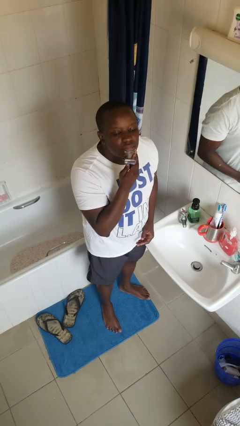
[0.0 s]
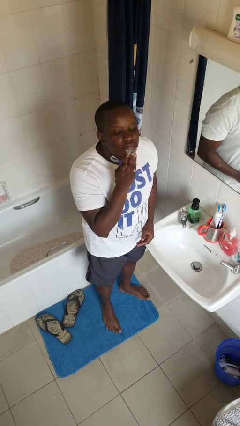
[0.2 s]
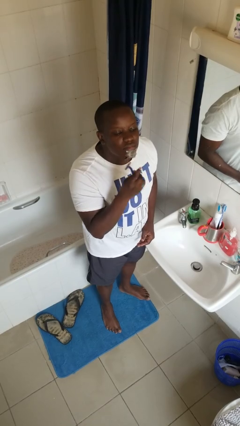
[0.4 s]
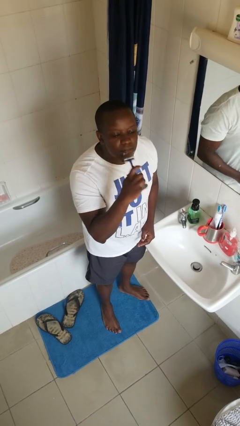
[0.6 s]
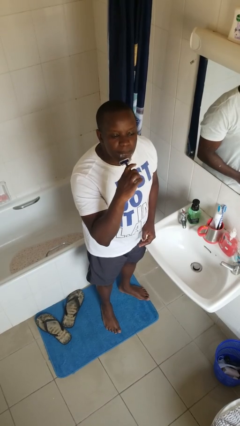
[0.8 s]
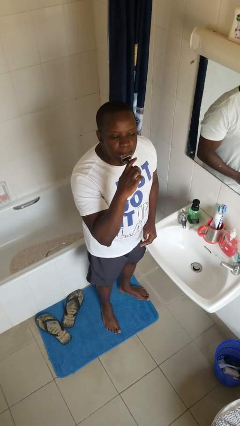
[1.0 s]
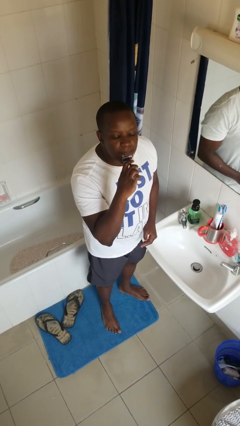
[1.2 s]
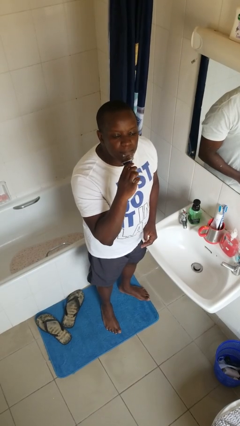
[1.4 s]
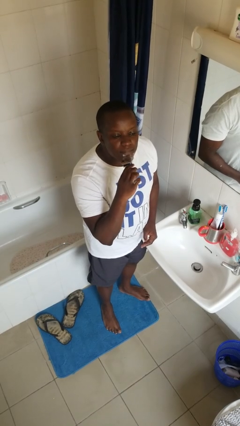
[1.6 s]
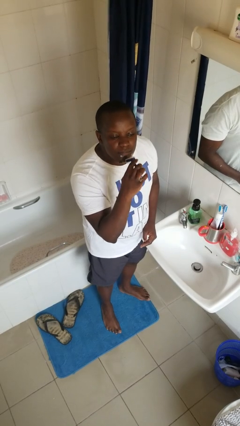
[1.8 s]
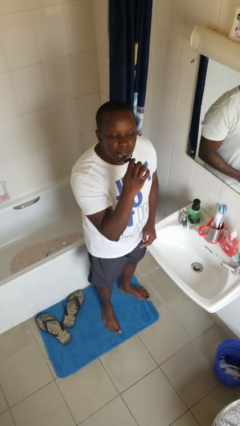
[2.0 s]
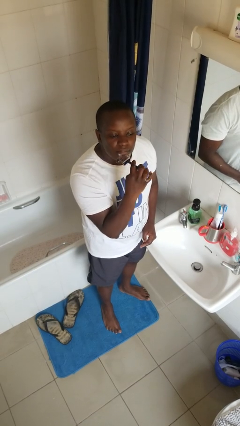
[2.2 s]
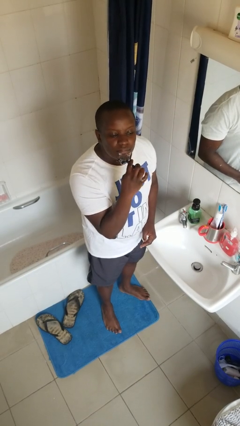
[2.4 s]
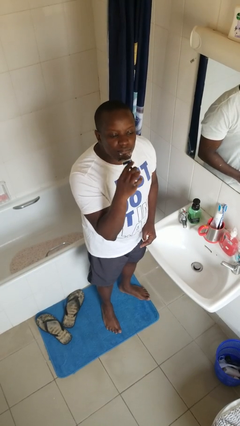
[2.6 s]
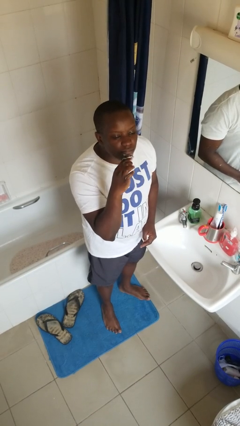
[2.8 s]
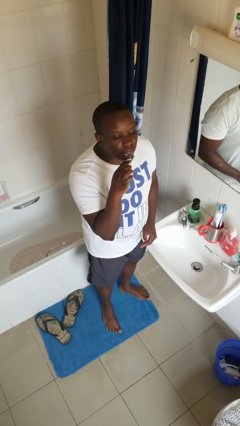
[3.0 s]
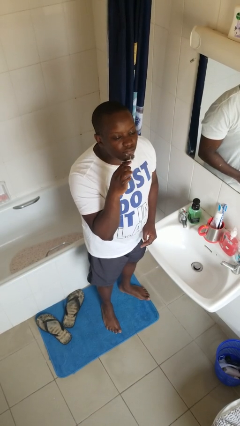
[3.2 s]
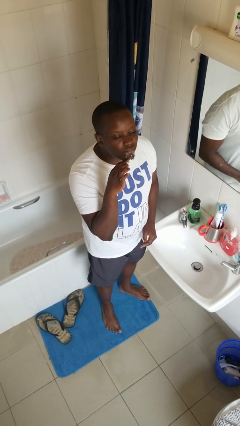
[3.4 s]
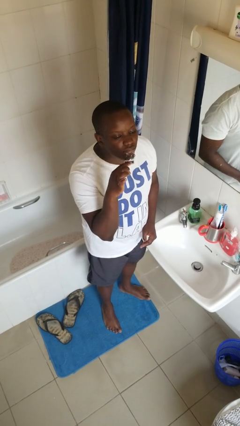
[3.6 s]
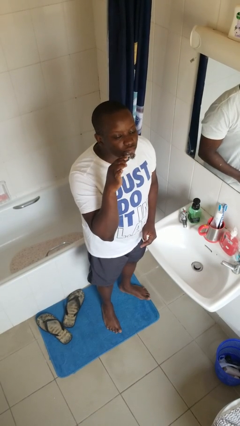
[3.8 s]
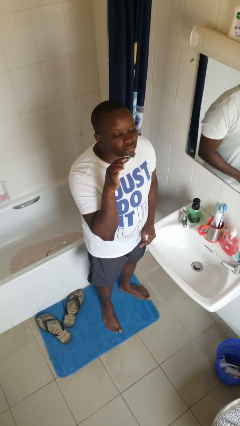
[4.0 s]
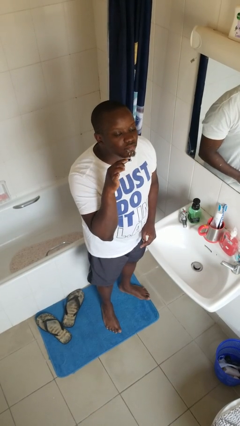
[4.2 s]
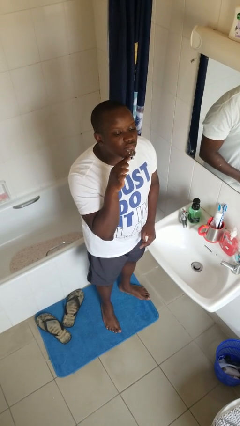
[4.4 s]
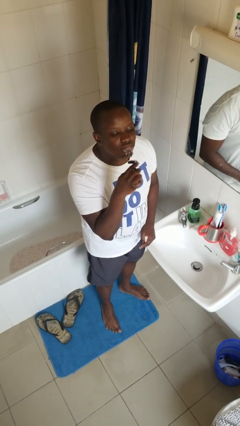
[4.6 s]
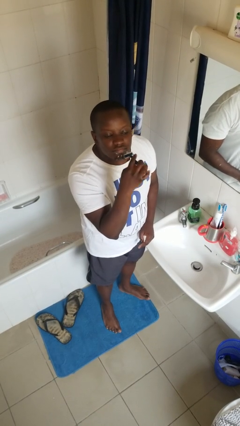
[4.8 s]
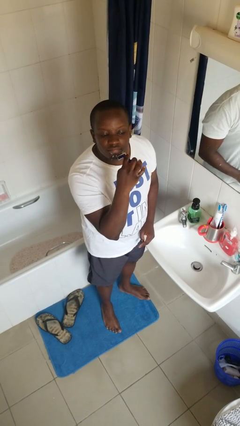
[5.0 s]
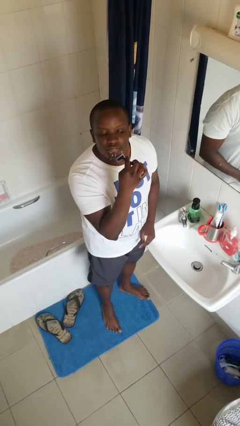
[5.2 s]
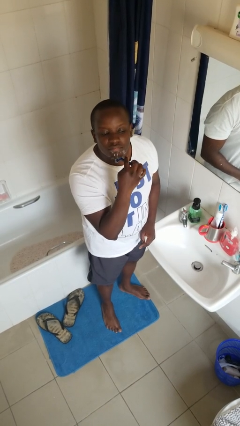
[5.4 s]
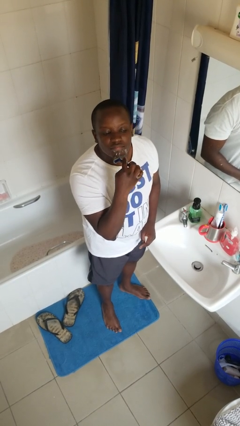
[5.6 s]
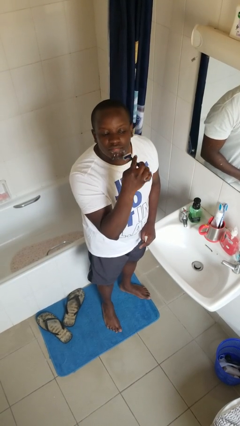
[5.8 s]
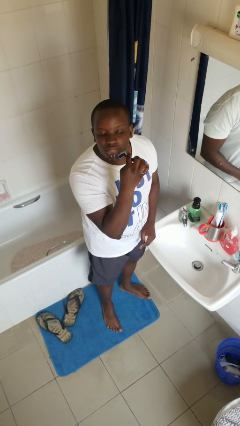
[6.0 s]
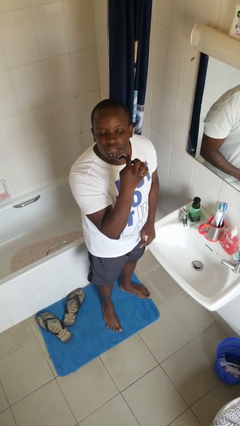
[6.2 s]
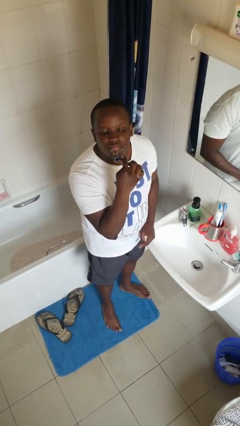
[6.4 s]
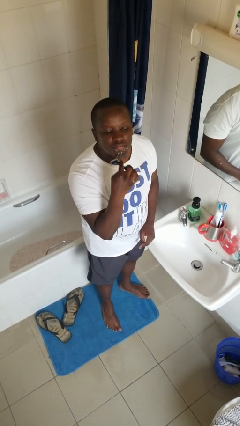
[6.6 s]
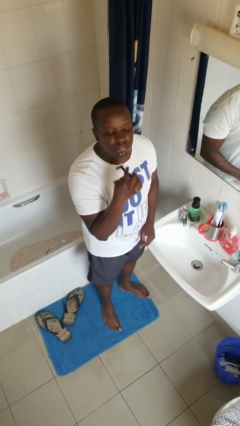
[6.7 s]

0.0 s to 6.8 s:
person shaves face

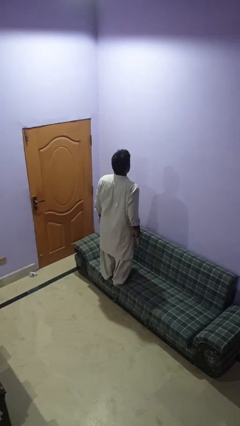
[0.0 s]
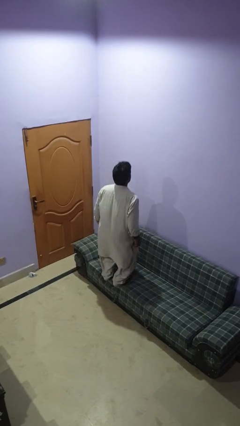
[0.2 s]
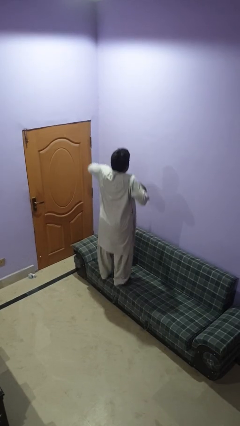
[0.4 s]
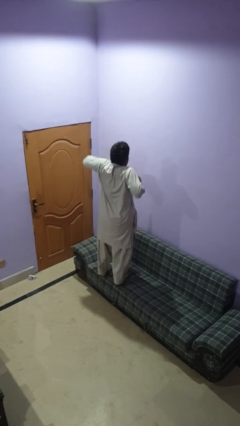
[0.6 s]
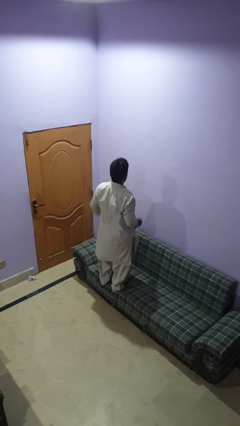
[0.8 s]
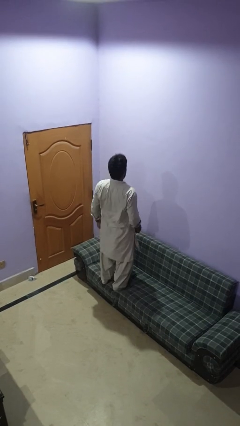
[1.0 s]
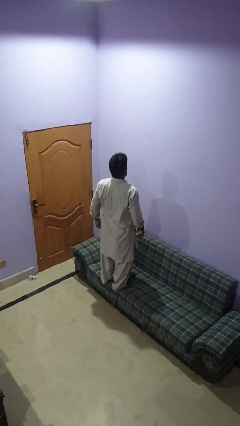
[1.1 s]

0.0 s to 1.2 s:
person jumps on couch

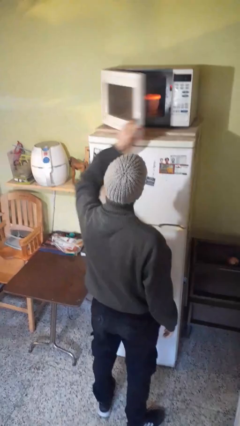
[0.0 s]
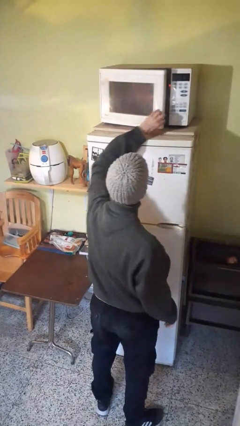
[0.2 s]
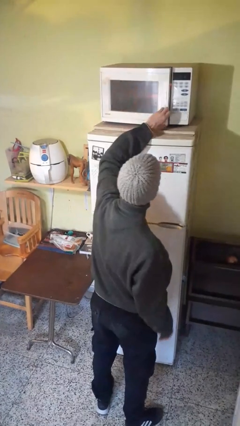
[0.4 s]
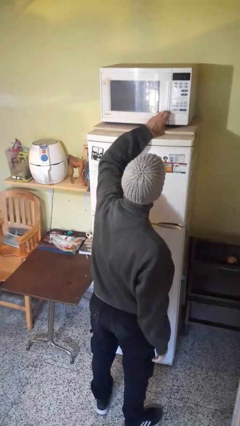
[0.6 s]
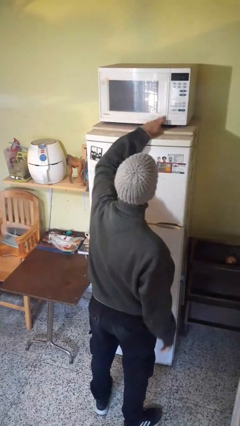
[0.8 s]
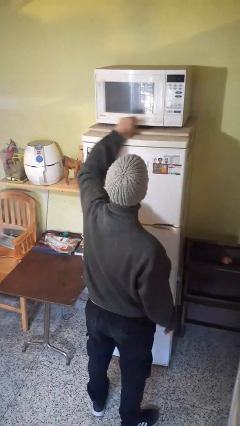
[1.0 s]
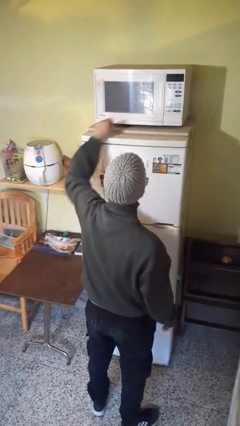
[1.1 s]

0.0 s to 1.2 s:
person closes microwave

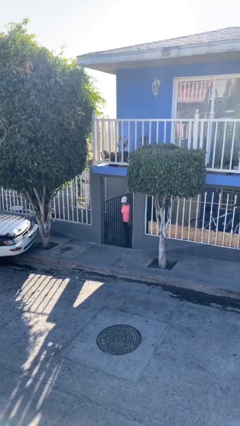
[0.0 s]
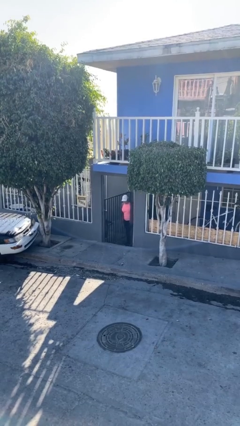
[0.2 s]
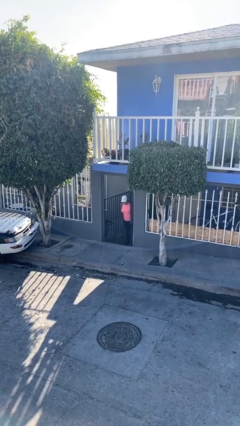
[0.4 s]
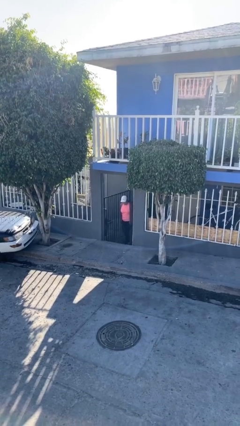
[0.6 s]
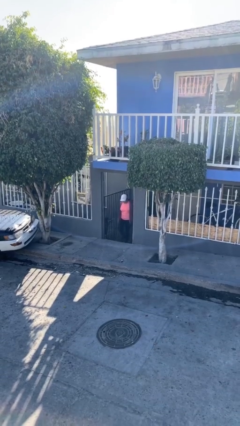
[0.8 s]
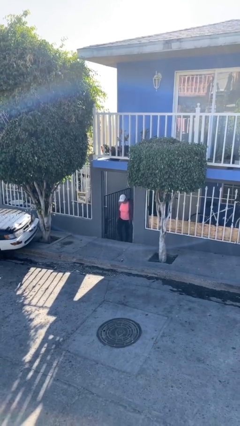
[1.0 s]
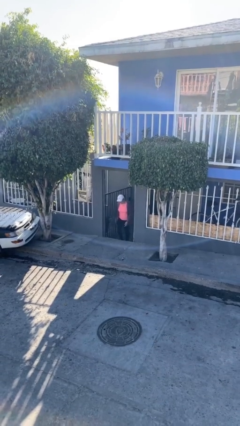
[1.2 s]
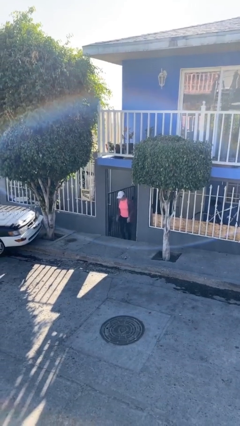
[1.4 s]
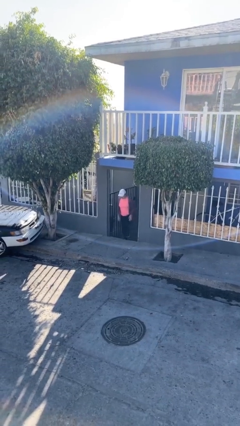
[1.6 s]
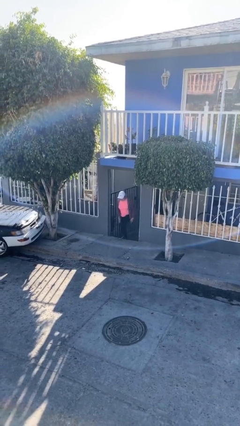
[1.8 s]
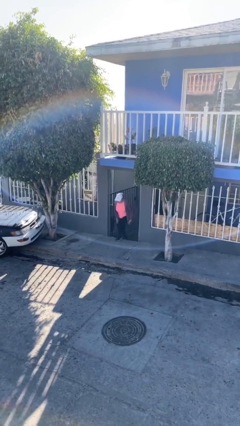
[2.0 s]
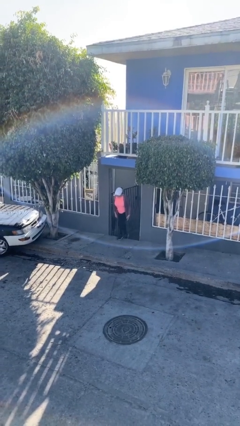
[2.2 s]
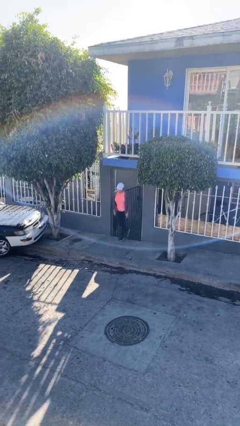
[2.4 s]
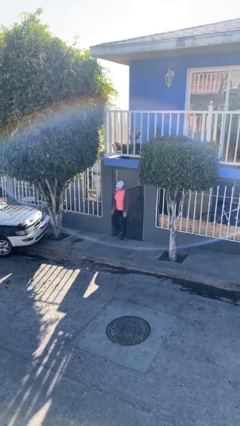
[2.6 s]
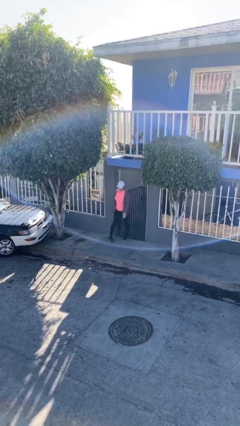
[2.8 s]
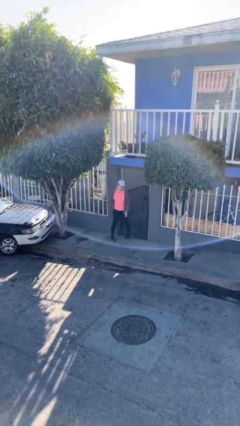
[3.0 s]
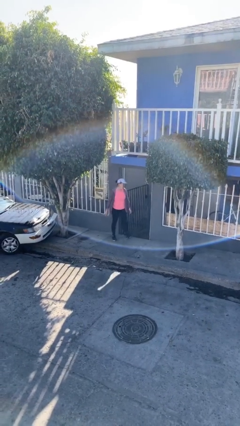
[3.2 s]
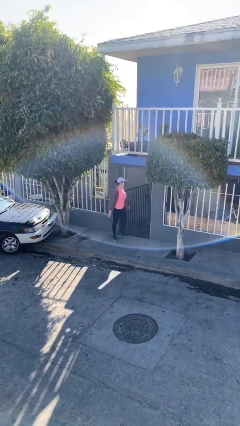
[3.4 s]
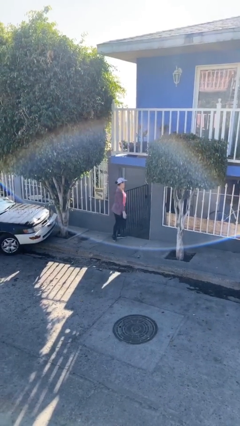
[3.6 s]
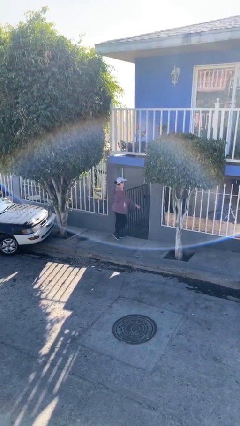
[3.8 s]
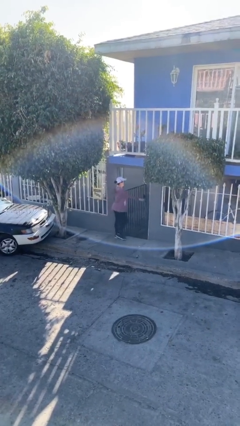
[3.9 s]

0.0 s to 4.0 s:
person enters scene through structure

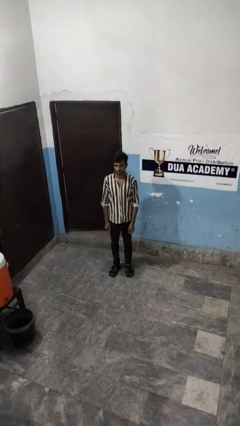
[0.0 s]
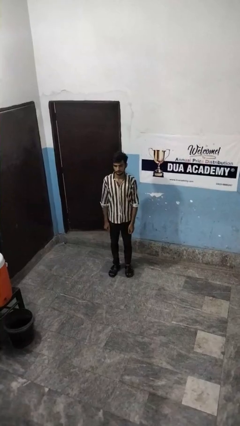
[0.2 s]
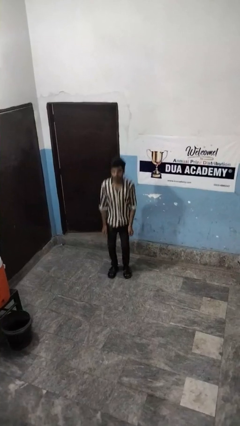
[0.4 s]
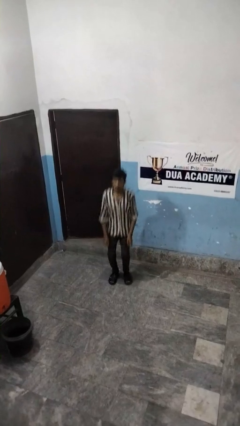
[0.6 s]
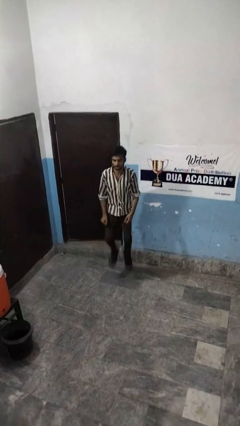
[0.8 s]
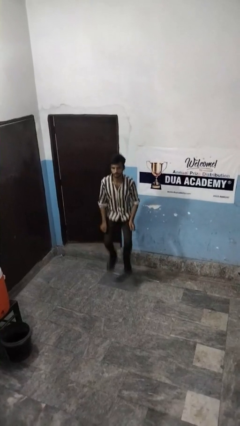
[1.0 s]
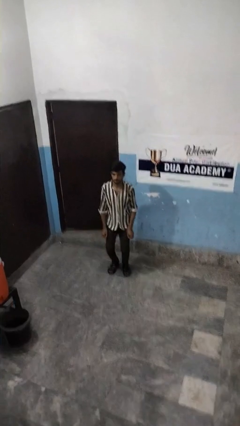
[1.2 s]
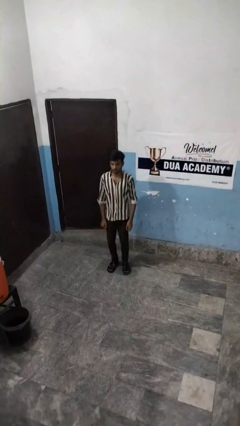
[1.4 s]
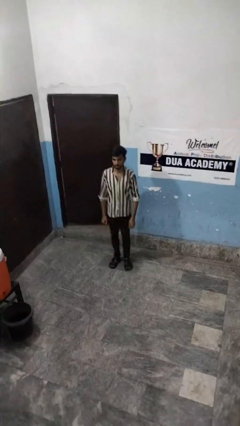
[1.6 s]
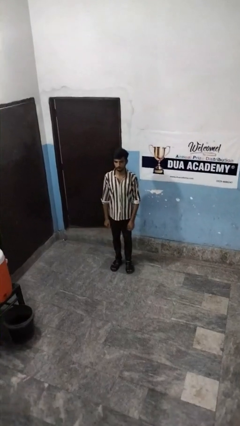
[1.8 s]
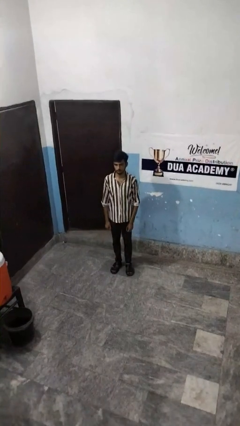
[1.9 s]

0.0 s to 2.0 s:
person jumps

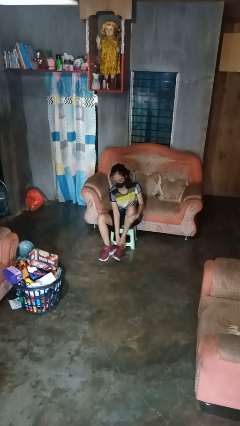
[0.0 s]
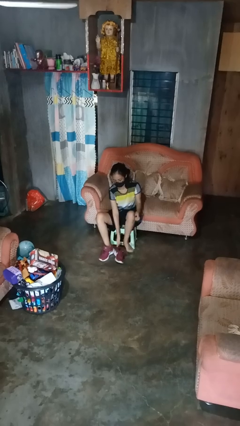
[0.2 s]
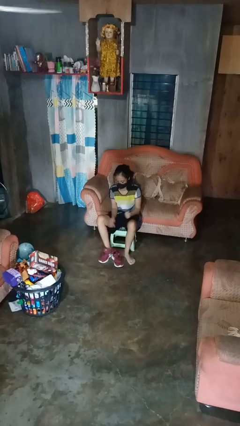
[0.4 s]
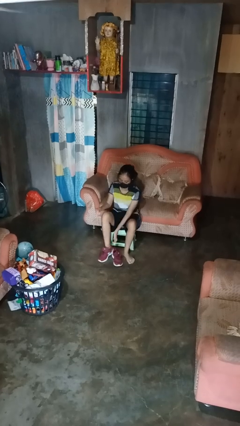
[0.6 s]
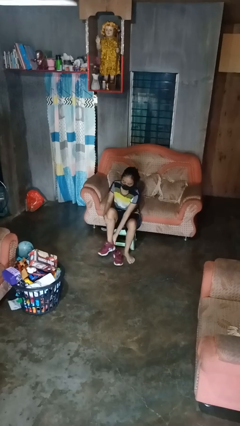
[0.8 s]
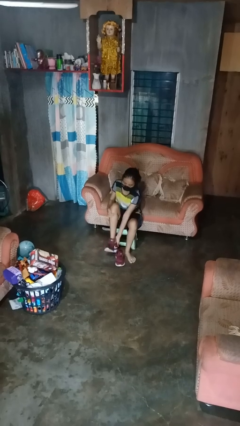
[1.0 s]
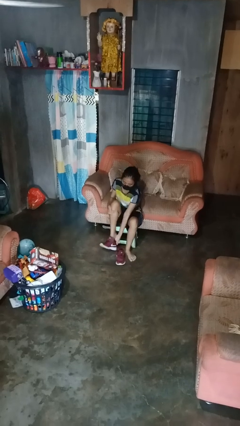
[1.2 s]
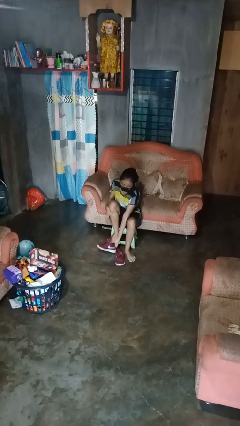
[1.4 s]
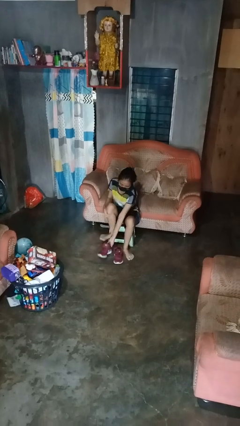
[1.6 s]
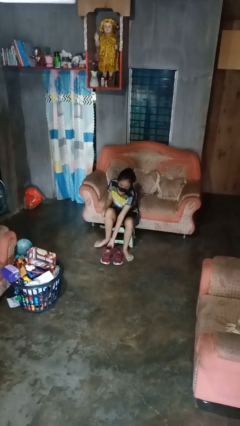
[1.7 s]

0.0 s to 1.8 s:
person takes off shoes

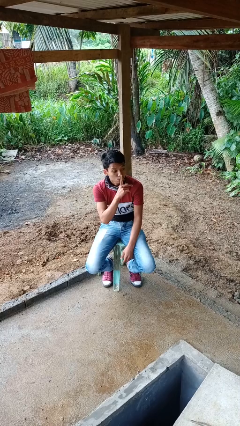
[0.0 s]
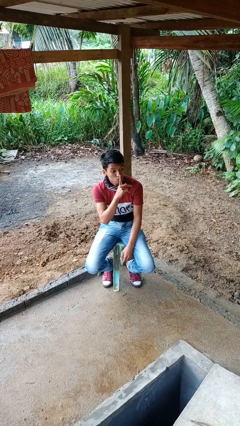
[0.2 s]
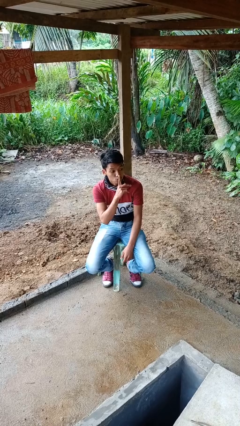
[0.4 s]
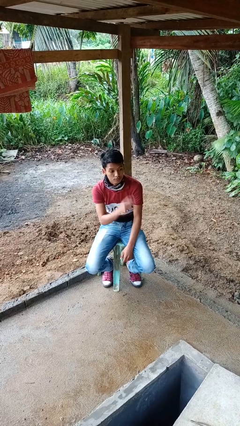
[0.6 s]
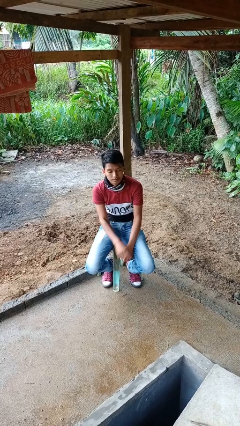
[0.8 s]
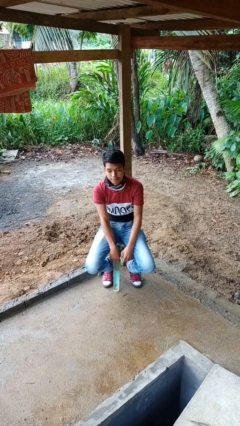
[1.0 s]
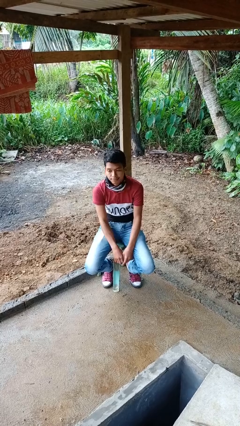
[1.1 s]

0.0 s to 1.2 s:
person gestures be quiet
